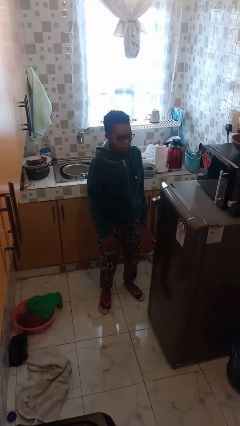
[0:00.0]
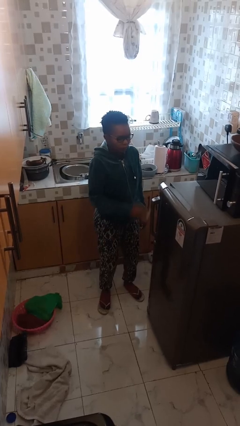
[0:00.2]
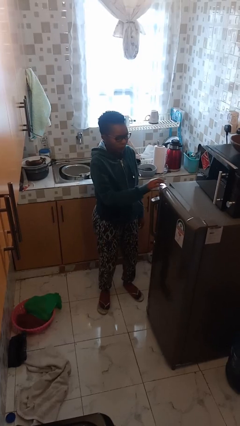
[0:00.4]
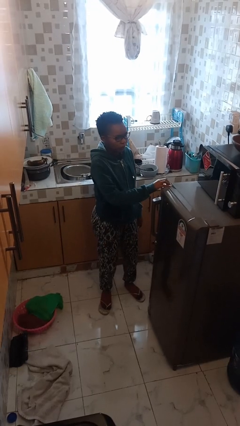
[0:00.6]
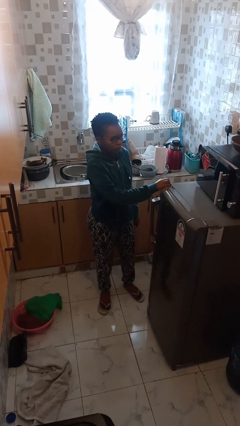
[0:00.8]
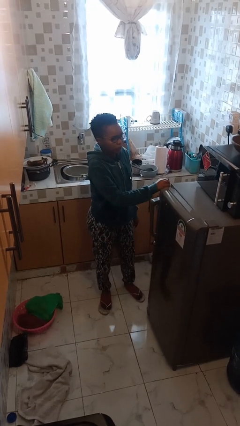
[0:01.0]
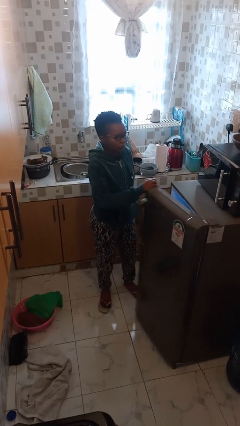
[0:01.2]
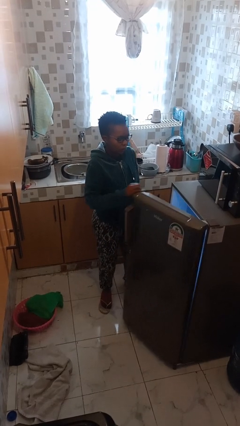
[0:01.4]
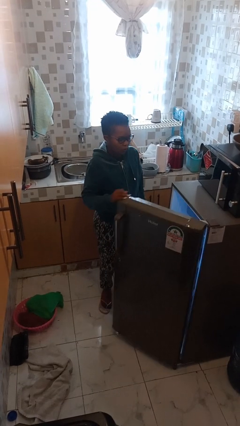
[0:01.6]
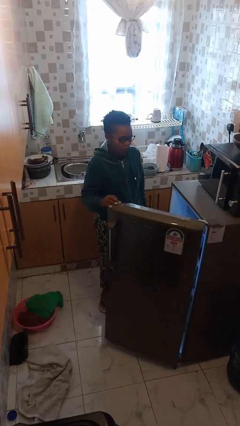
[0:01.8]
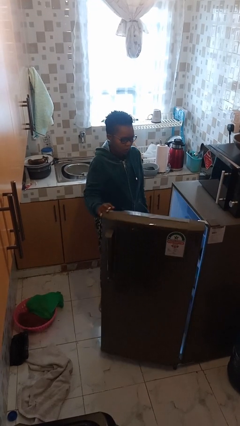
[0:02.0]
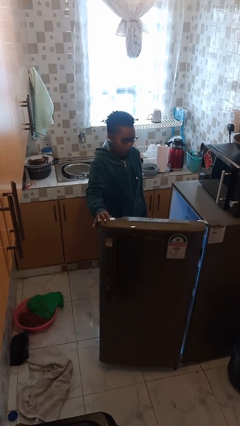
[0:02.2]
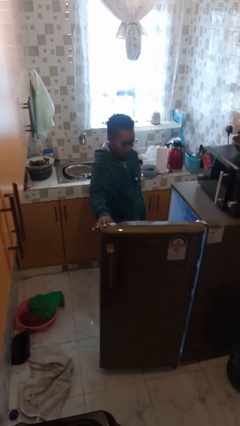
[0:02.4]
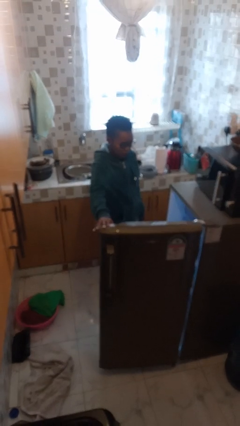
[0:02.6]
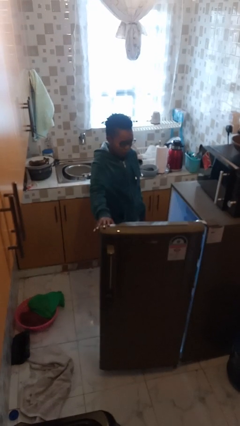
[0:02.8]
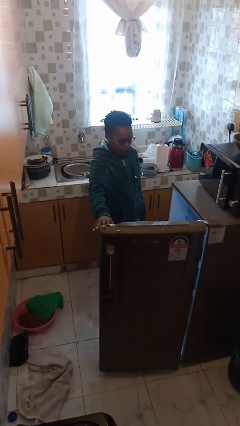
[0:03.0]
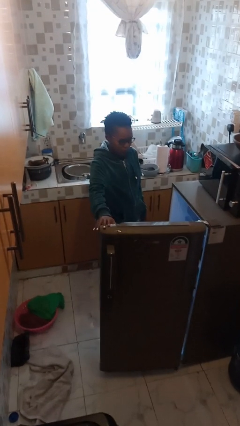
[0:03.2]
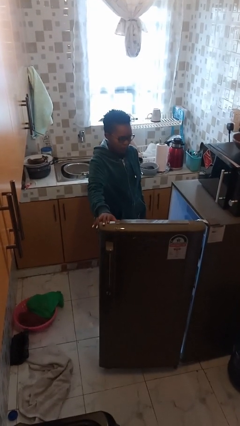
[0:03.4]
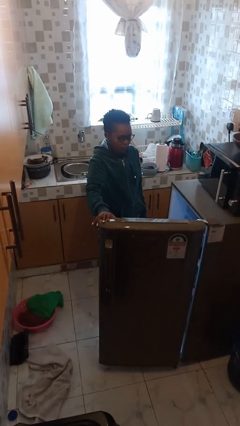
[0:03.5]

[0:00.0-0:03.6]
person opens refrigerator

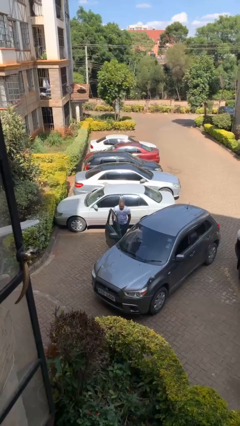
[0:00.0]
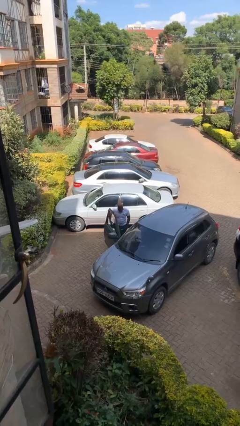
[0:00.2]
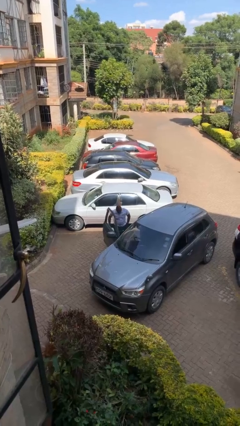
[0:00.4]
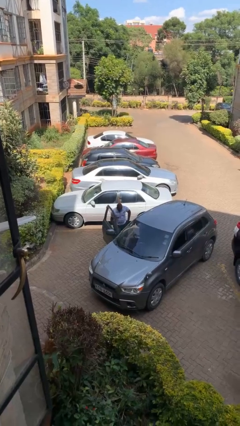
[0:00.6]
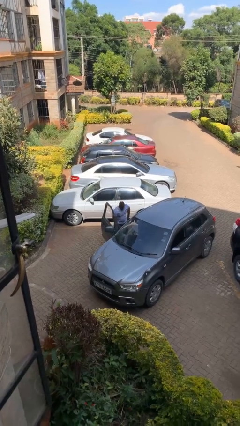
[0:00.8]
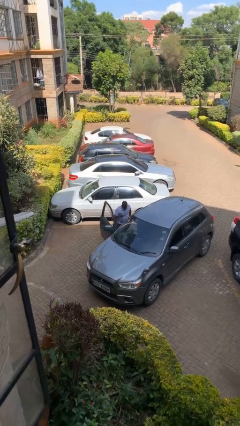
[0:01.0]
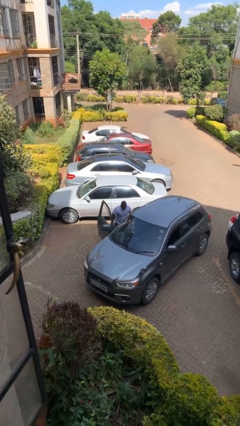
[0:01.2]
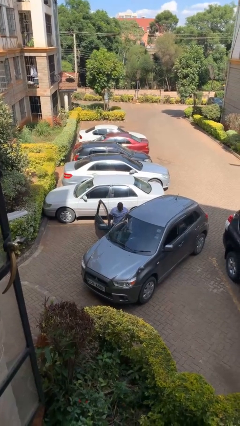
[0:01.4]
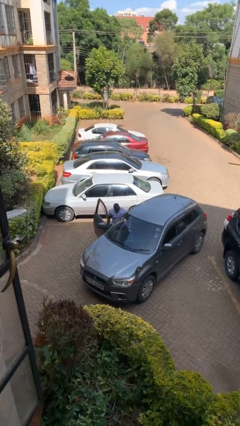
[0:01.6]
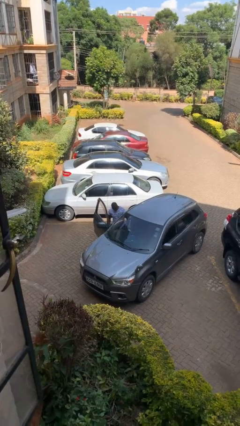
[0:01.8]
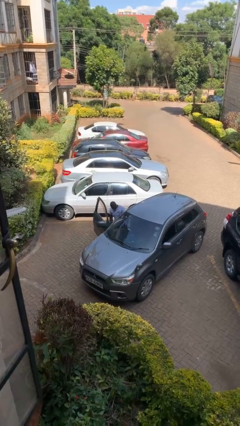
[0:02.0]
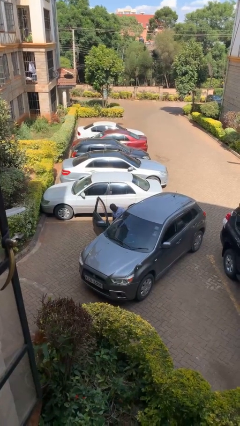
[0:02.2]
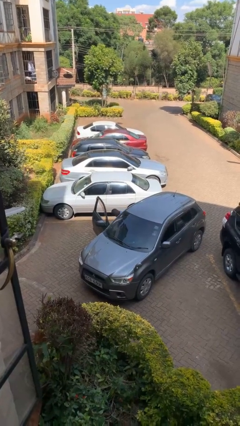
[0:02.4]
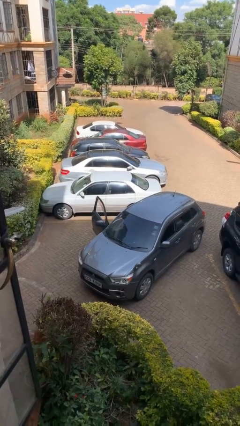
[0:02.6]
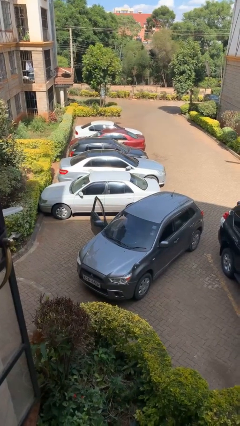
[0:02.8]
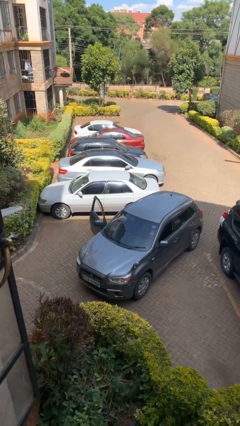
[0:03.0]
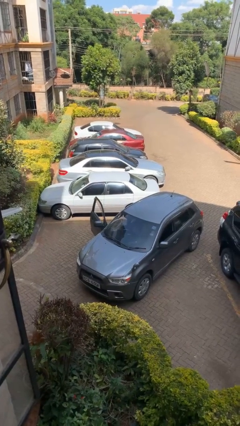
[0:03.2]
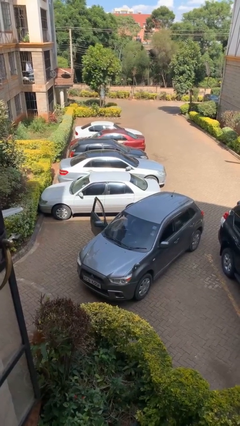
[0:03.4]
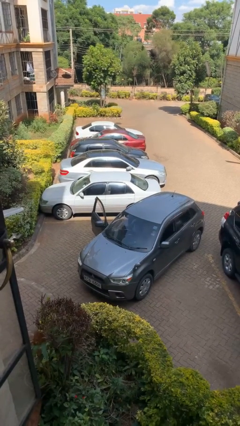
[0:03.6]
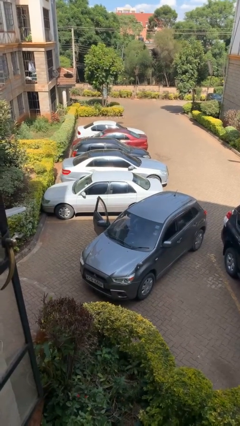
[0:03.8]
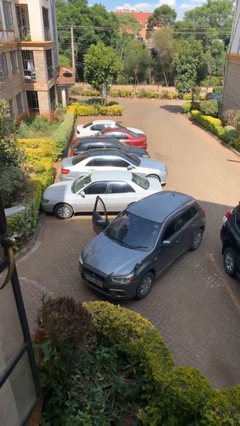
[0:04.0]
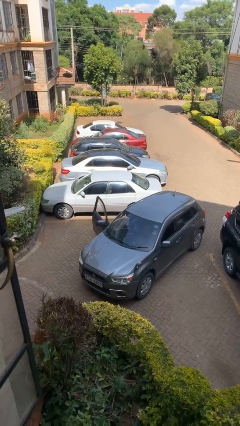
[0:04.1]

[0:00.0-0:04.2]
person enters car

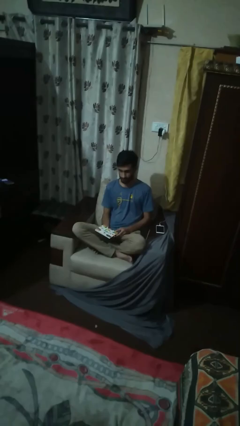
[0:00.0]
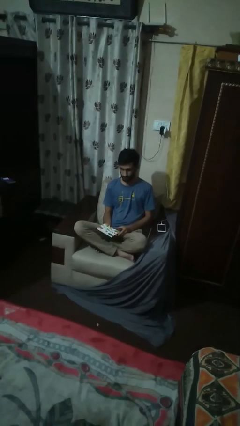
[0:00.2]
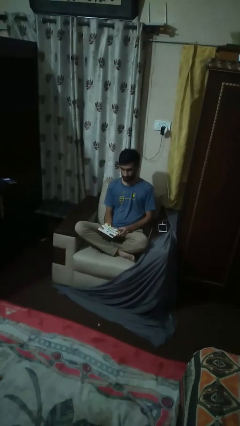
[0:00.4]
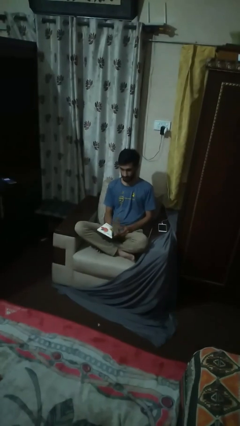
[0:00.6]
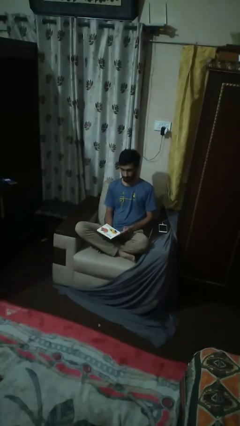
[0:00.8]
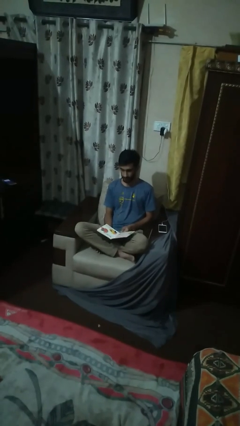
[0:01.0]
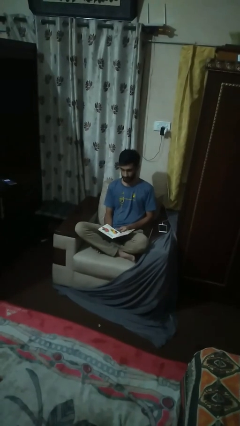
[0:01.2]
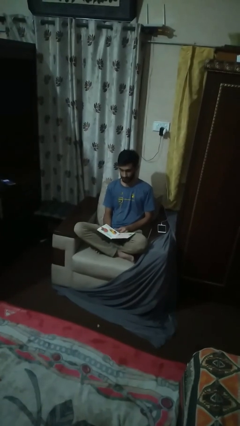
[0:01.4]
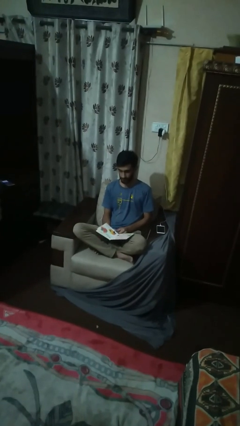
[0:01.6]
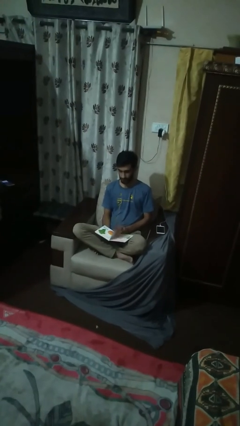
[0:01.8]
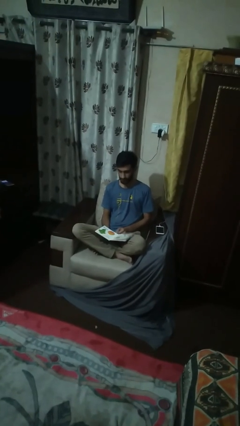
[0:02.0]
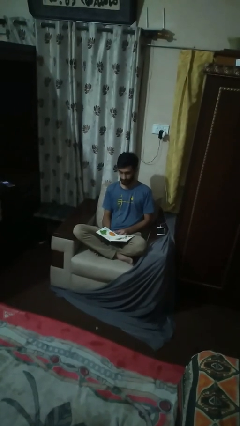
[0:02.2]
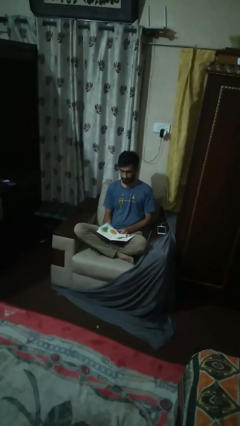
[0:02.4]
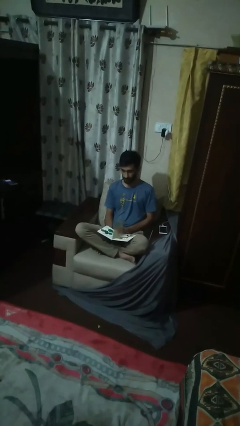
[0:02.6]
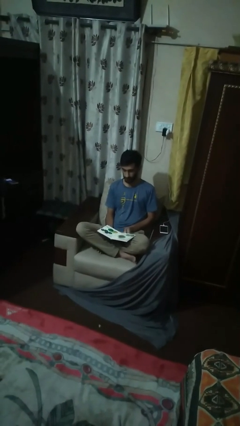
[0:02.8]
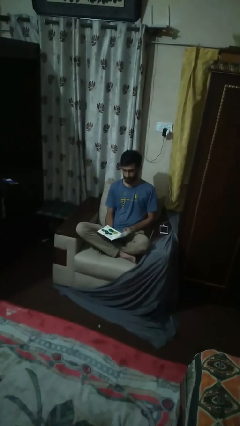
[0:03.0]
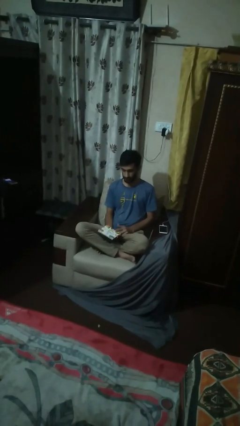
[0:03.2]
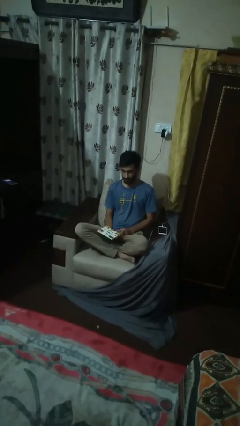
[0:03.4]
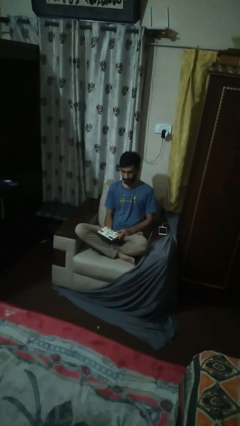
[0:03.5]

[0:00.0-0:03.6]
person reads magazine

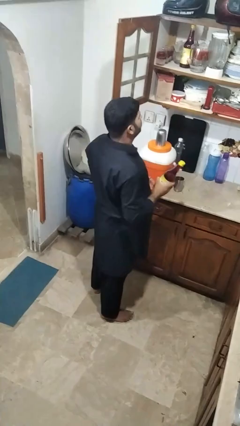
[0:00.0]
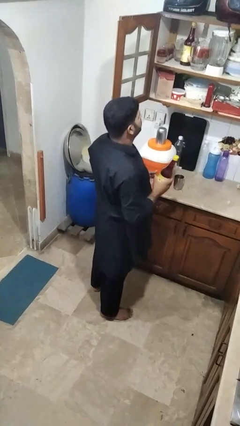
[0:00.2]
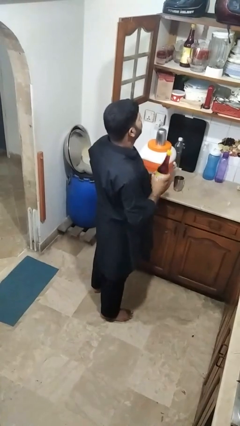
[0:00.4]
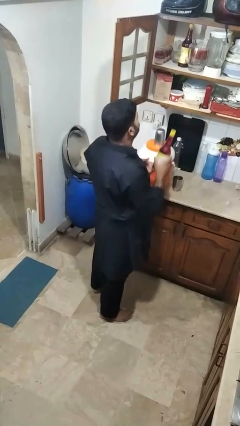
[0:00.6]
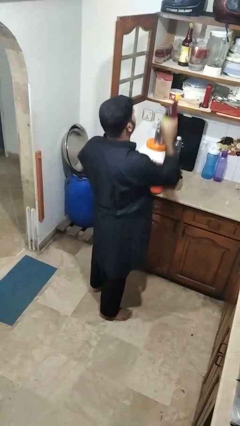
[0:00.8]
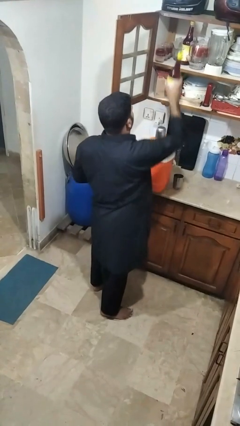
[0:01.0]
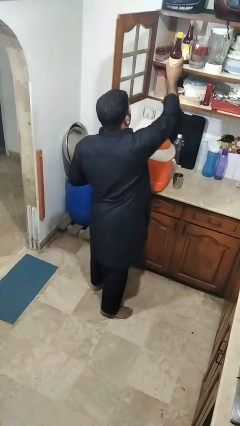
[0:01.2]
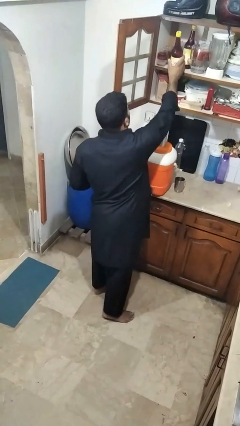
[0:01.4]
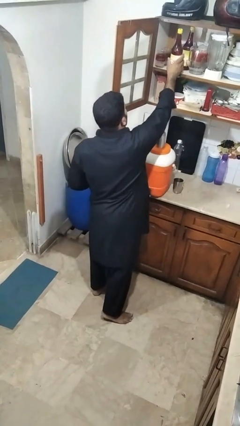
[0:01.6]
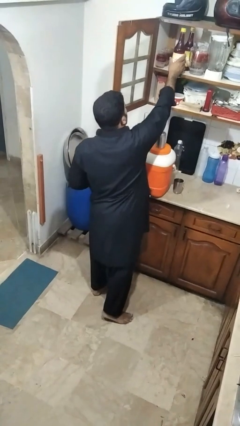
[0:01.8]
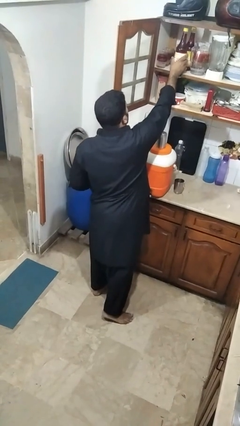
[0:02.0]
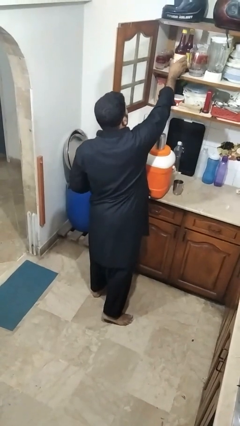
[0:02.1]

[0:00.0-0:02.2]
person puts down object into cabinet

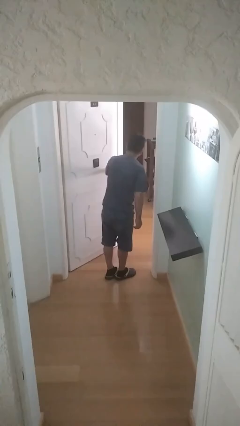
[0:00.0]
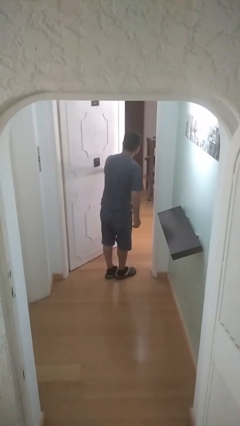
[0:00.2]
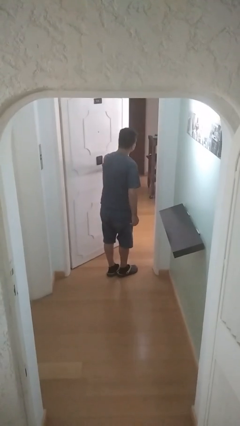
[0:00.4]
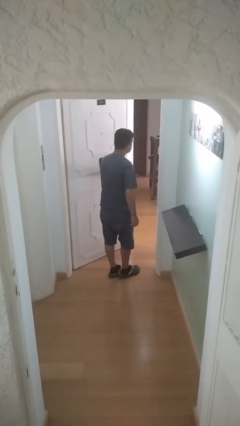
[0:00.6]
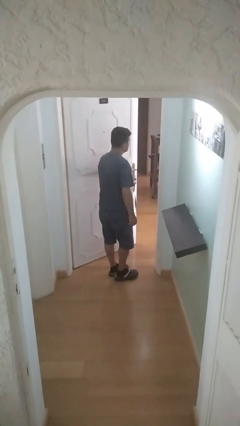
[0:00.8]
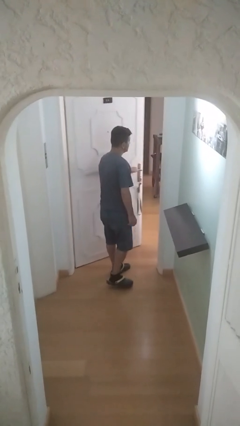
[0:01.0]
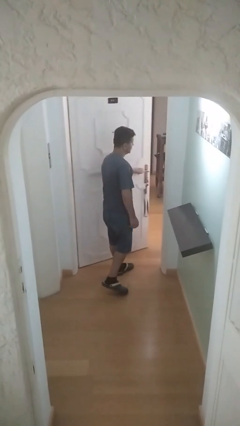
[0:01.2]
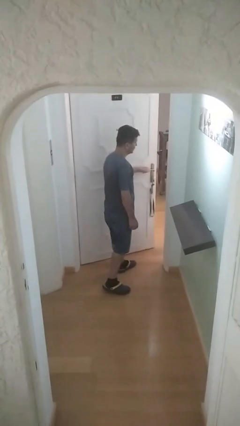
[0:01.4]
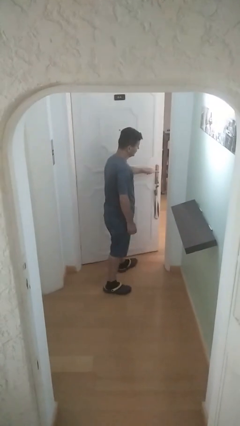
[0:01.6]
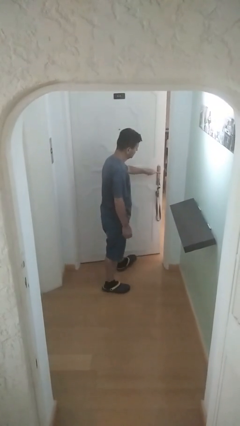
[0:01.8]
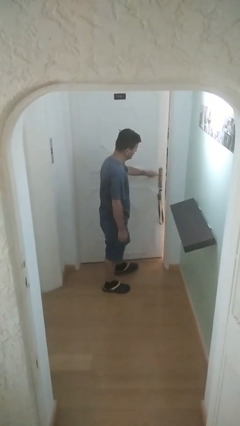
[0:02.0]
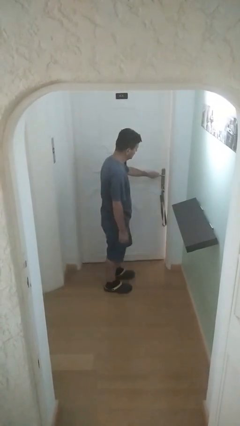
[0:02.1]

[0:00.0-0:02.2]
person closes facility door

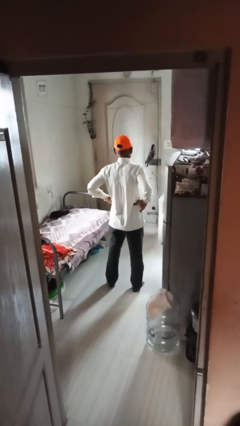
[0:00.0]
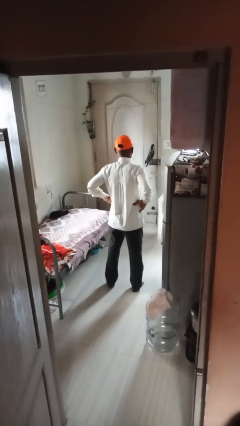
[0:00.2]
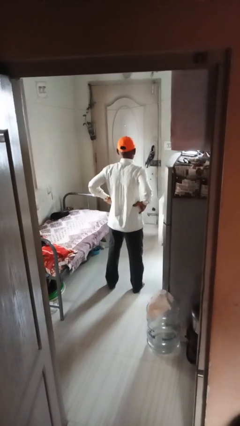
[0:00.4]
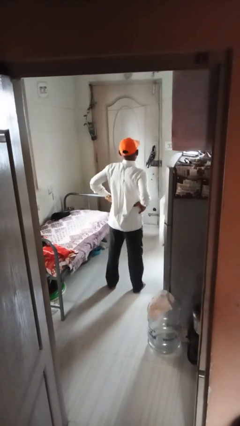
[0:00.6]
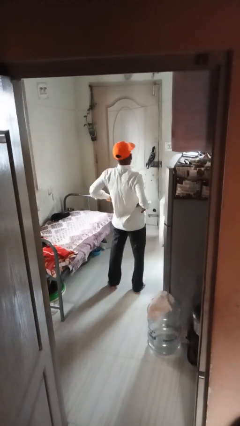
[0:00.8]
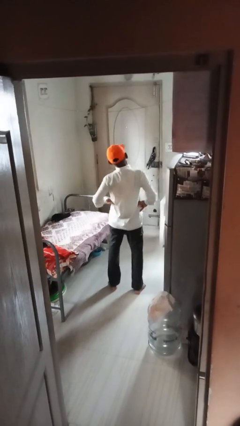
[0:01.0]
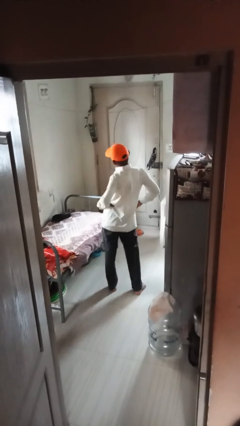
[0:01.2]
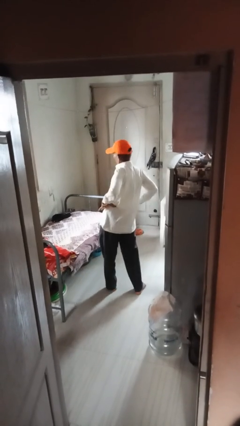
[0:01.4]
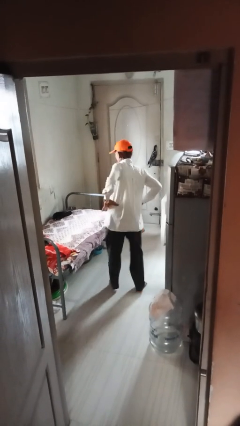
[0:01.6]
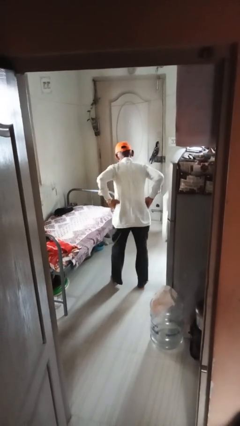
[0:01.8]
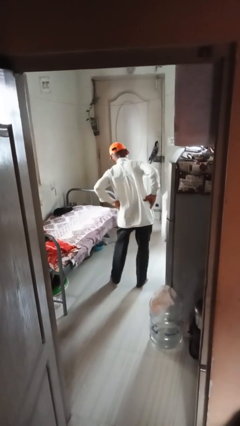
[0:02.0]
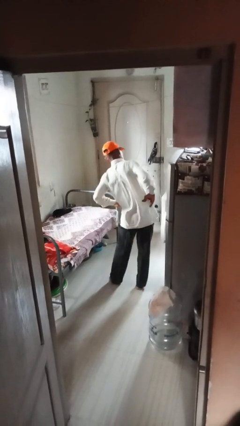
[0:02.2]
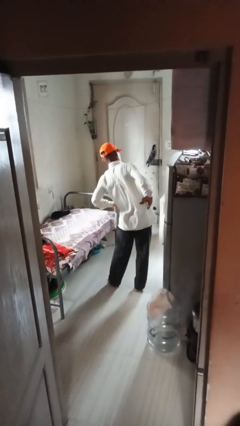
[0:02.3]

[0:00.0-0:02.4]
person wiggles hips
